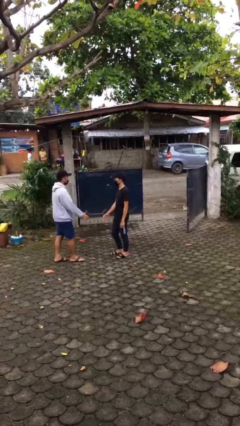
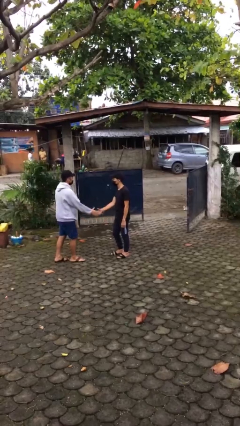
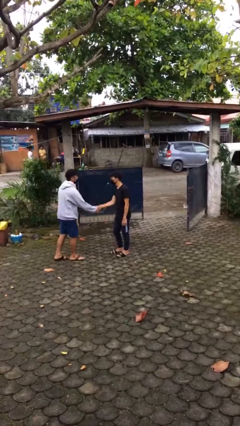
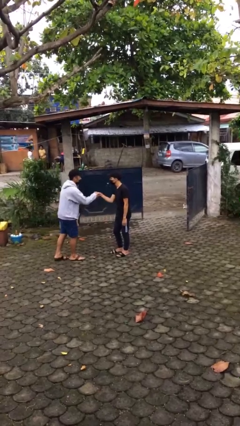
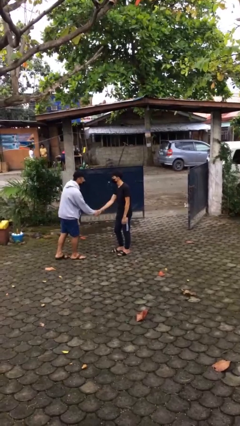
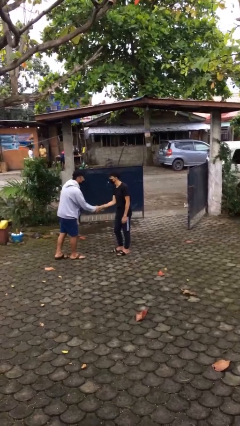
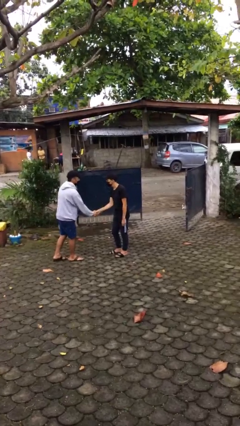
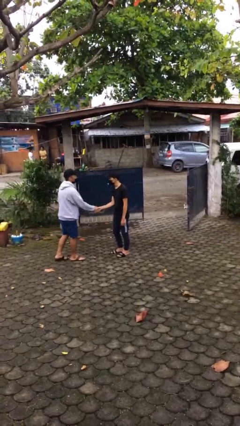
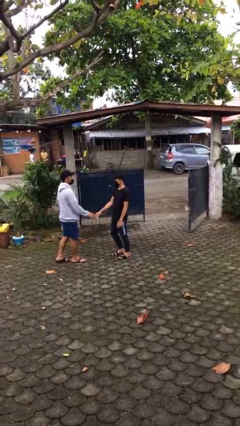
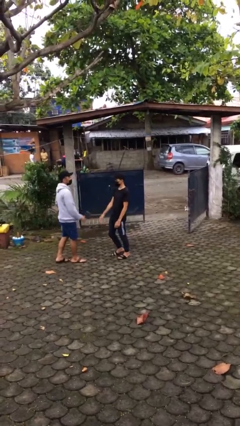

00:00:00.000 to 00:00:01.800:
person shakes hand

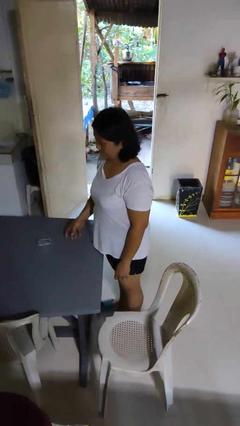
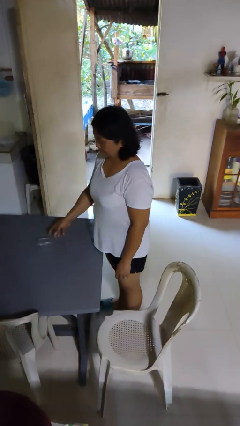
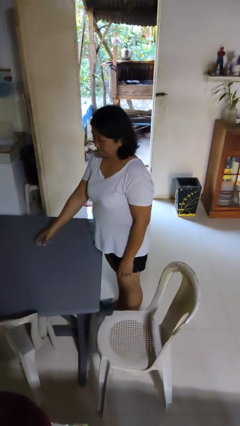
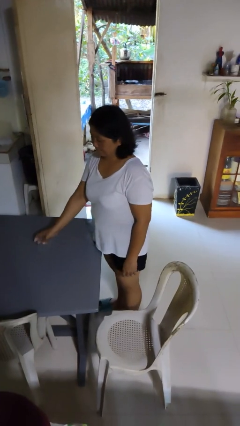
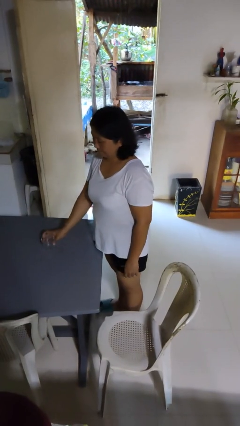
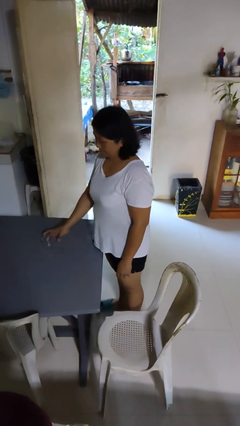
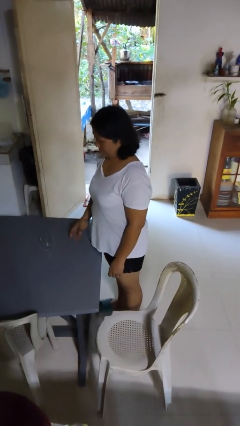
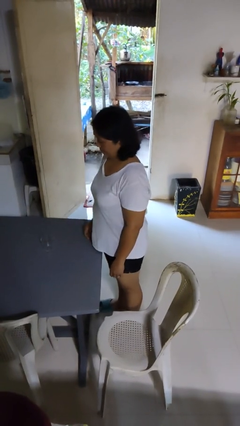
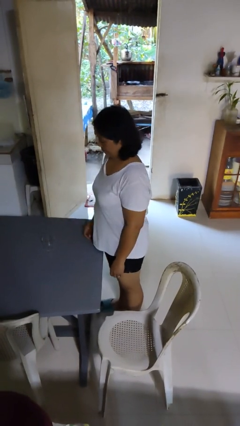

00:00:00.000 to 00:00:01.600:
person sets upright glass

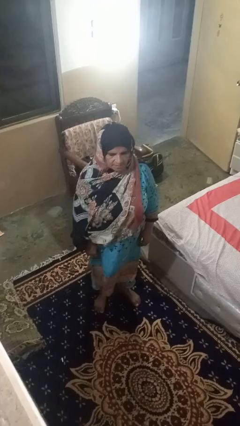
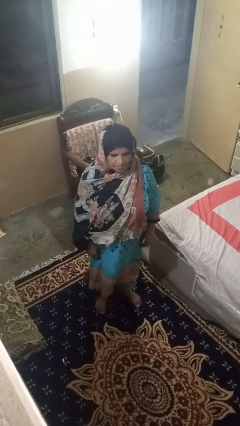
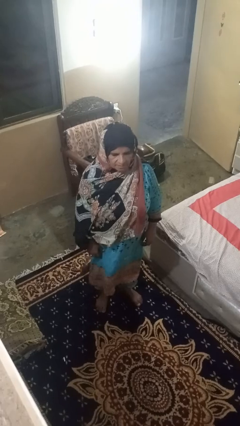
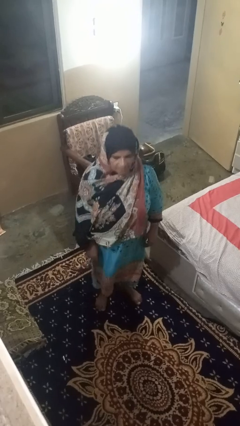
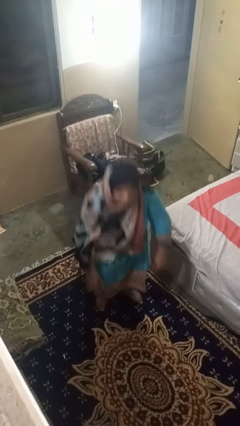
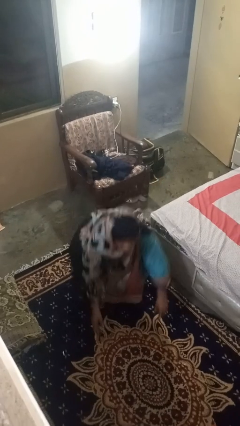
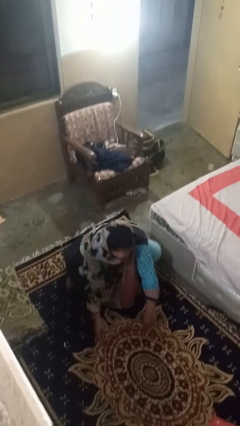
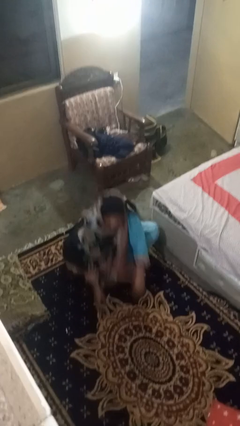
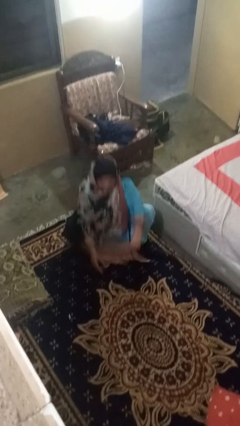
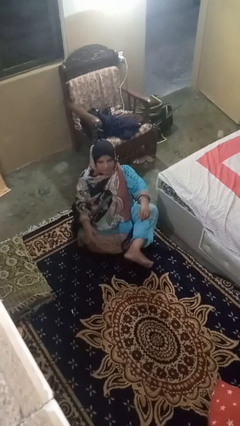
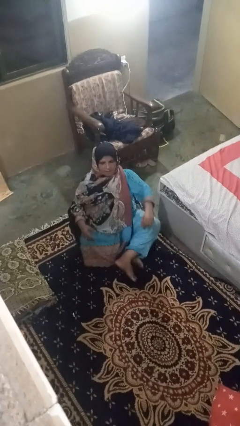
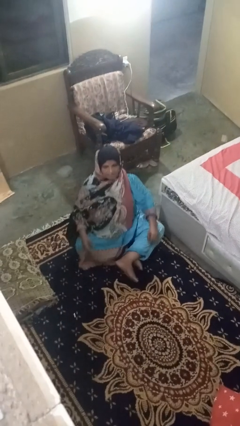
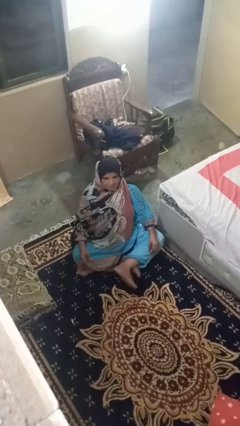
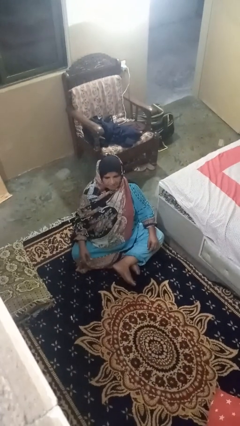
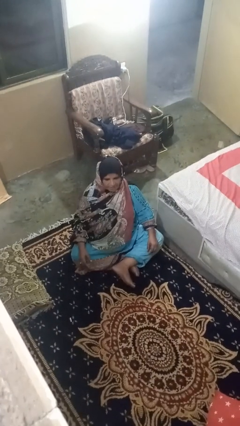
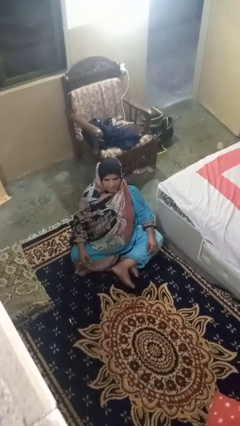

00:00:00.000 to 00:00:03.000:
person sits crisscross

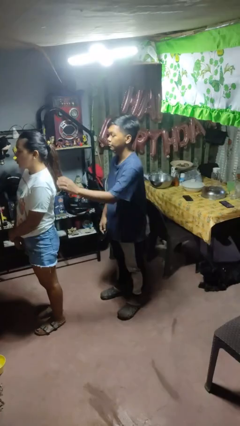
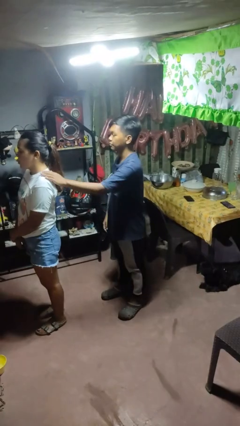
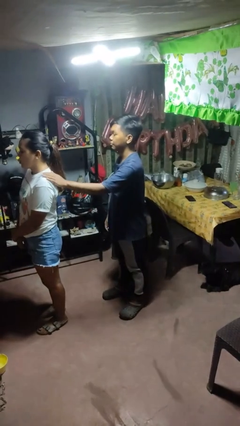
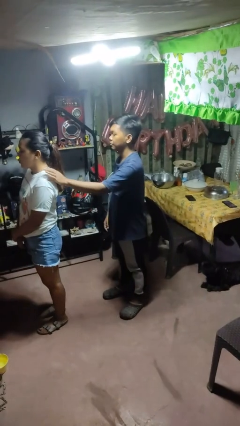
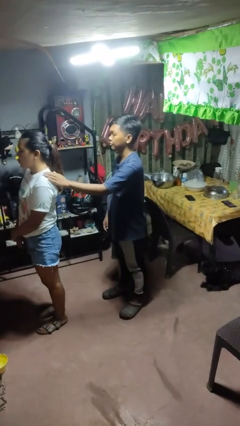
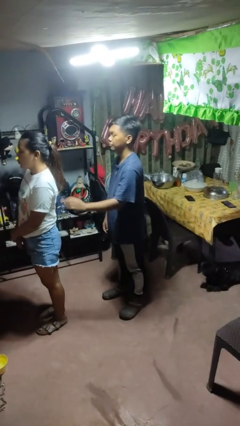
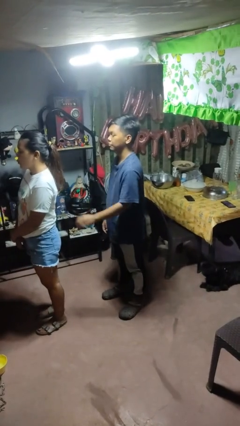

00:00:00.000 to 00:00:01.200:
person pounds shoulders of person

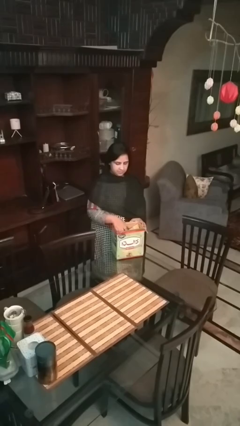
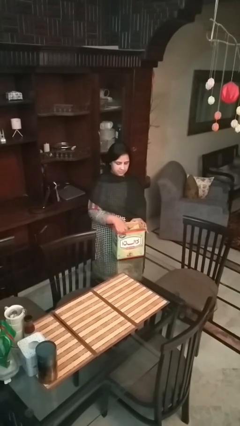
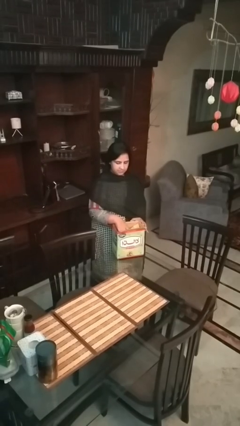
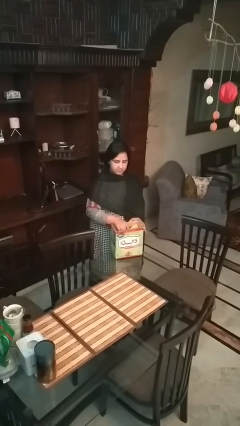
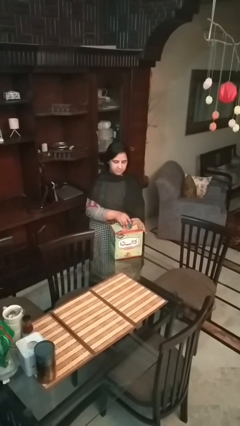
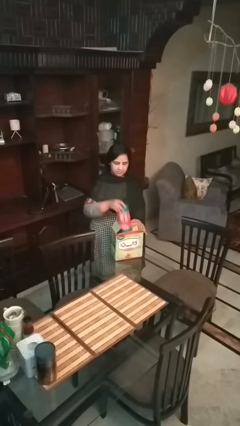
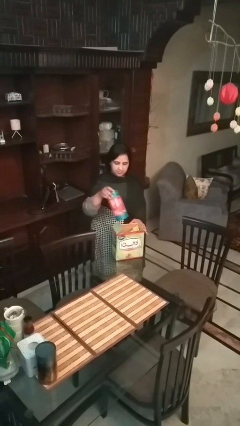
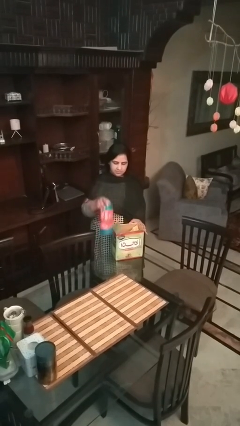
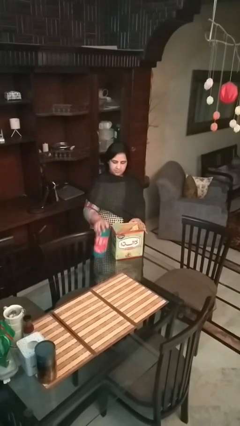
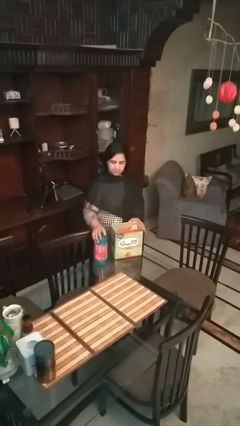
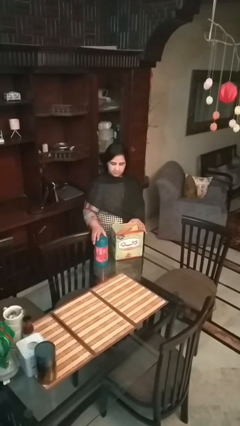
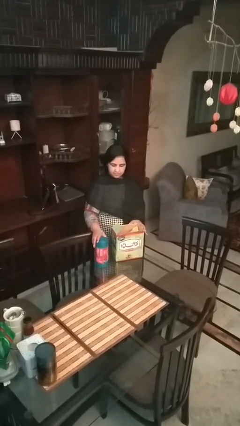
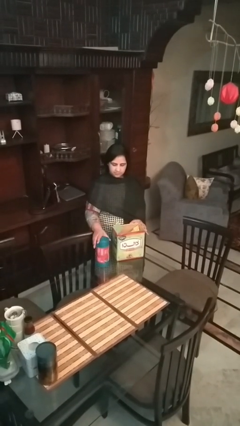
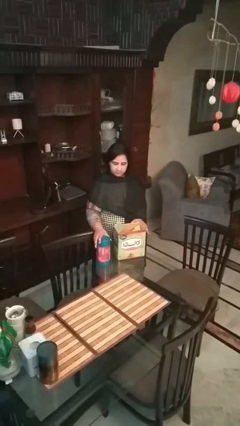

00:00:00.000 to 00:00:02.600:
person takes object from box

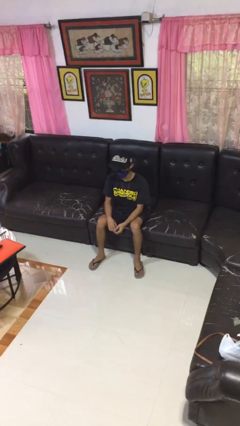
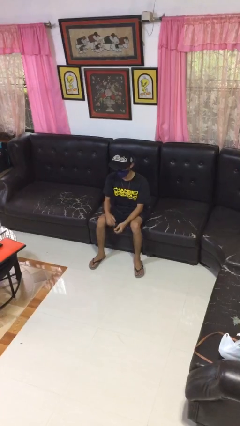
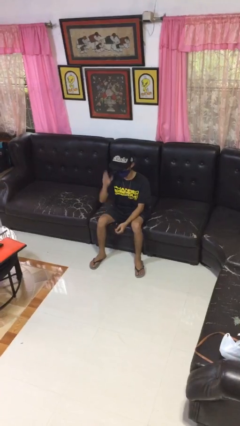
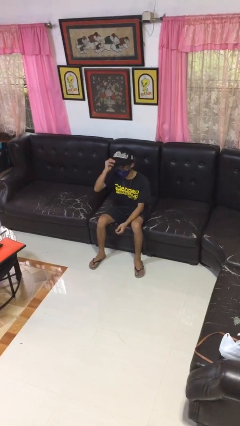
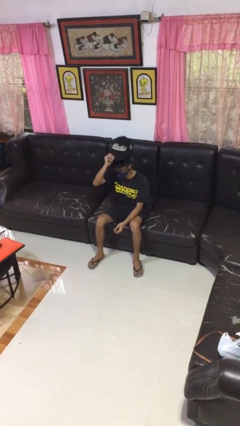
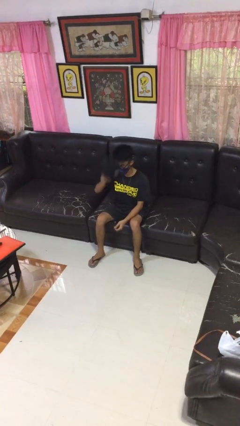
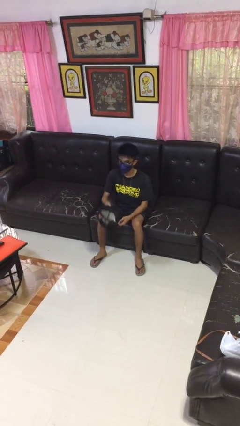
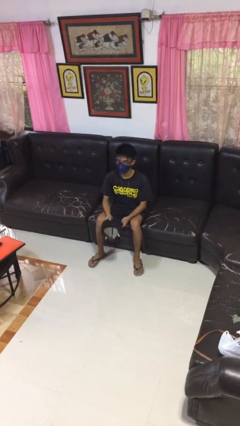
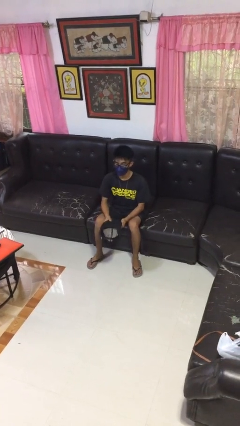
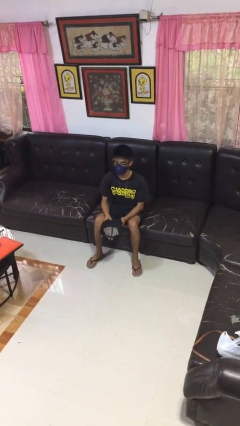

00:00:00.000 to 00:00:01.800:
person takes off hat

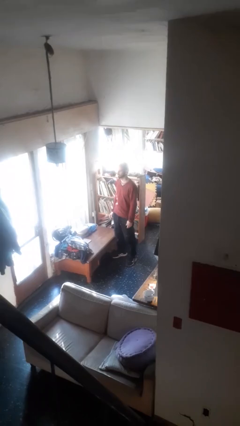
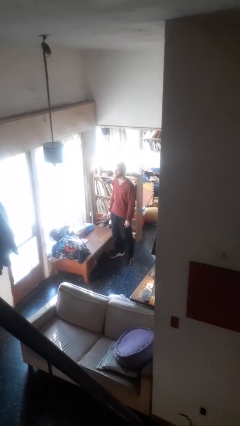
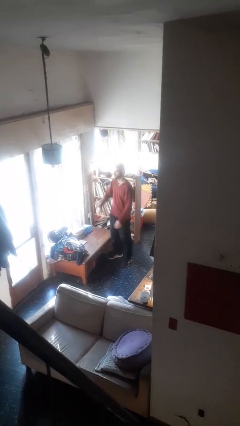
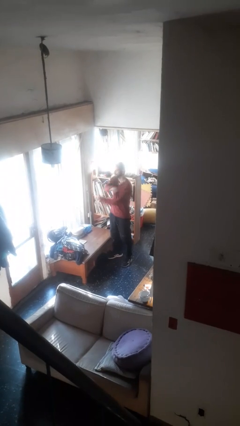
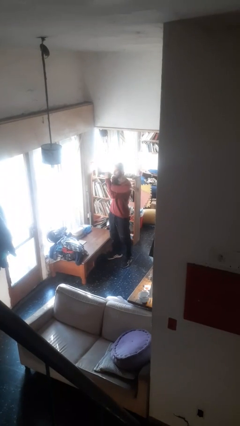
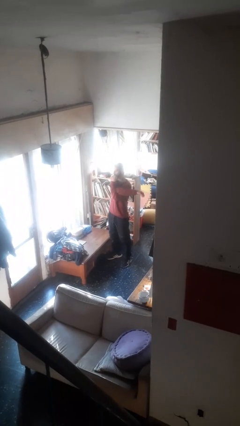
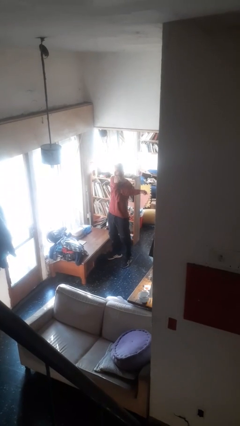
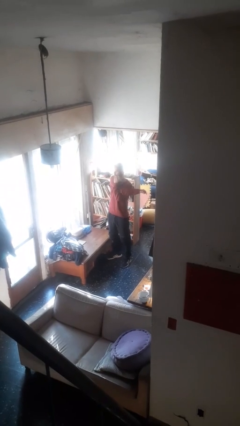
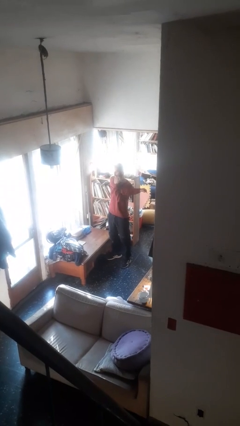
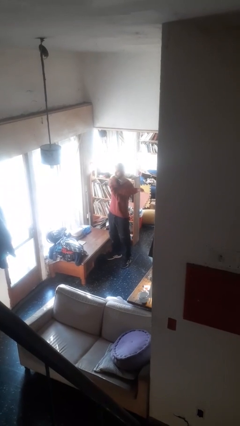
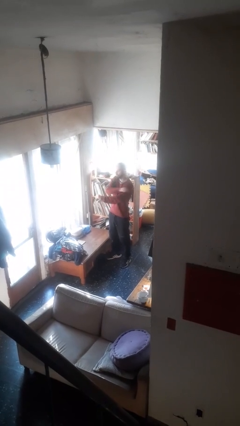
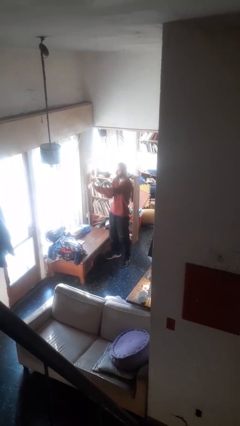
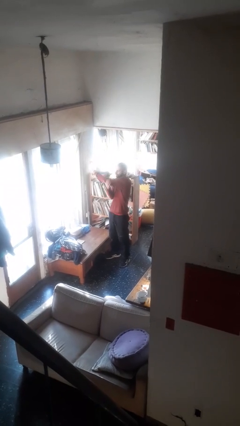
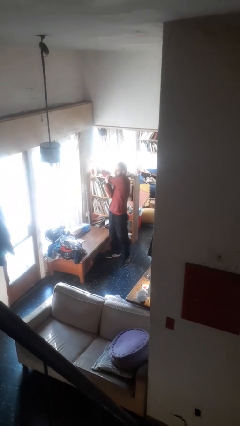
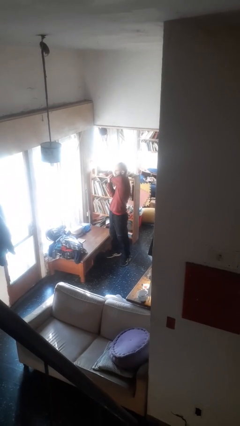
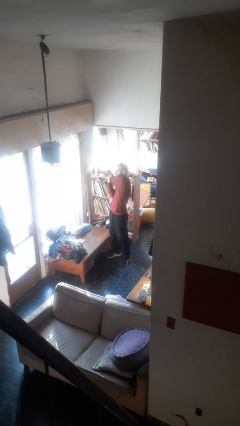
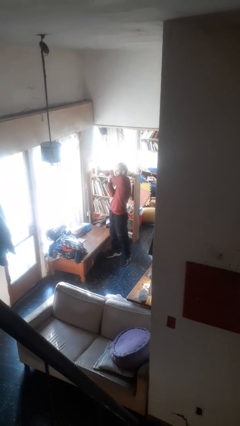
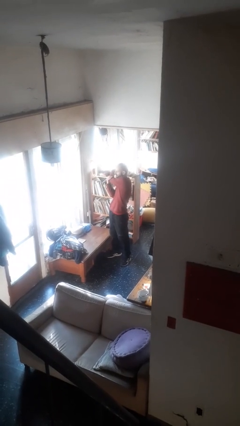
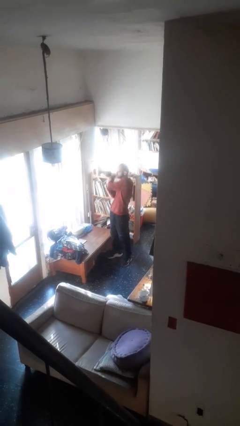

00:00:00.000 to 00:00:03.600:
person stretches arms to side

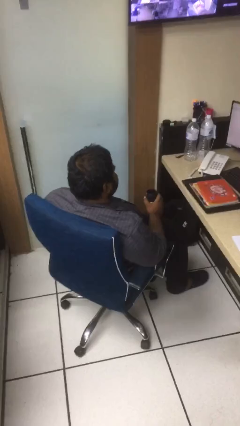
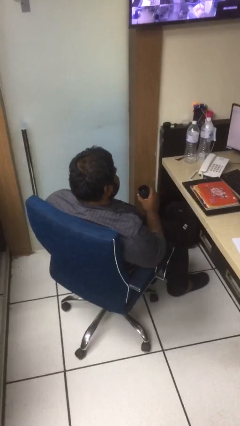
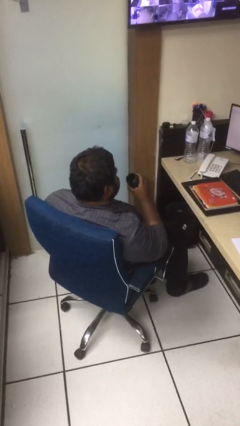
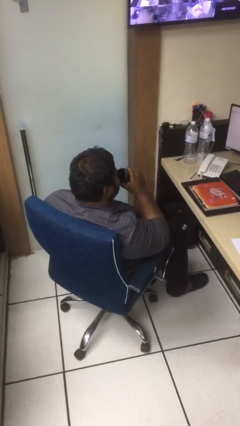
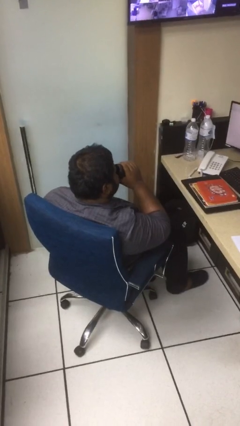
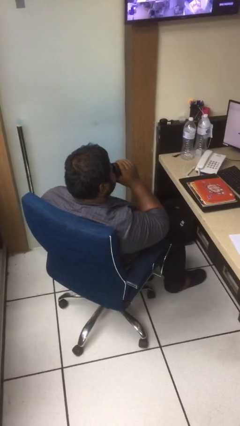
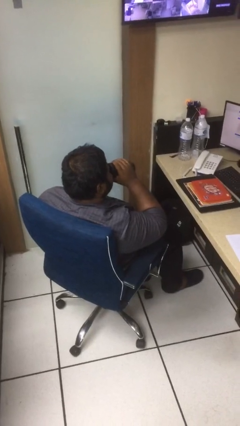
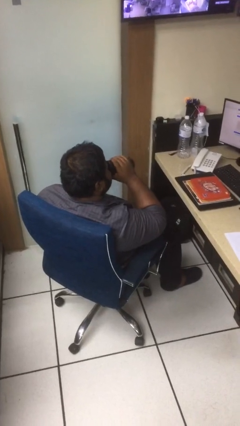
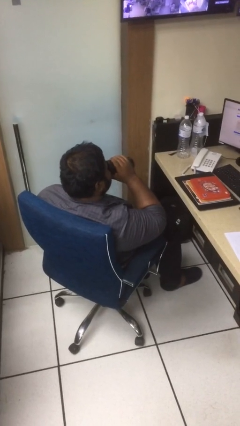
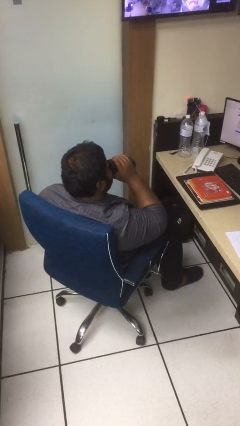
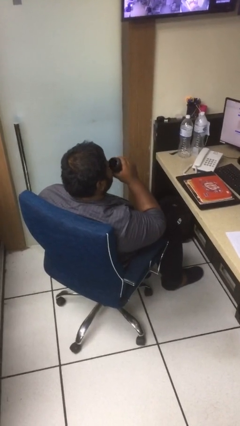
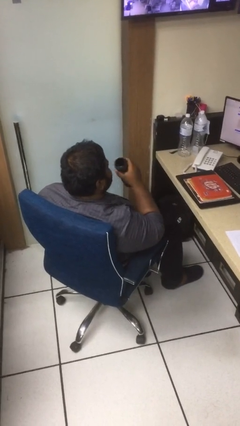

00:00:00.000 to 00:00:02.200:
person drinks from bottle
